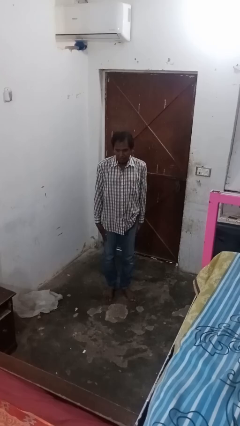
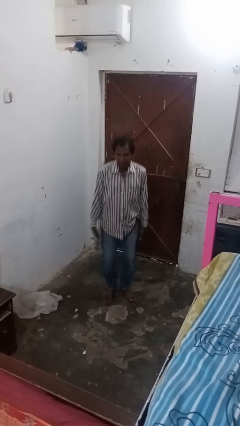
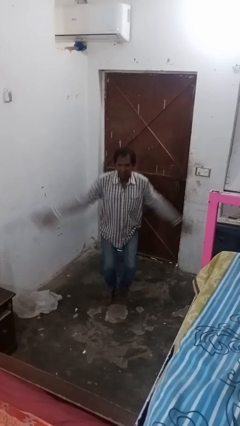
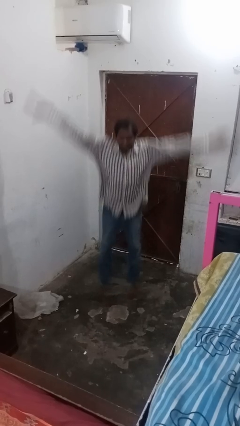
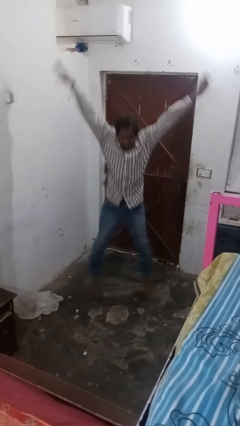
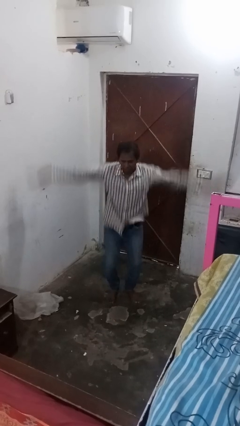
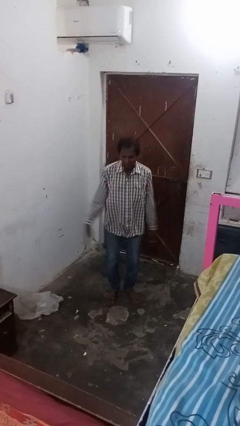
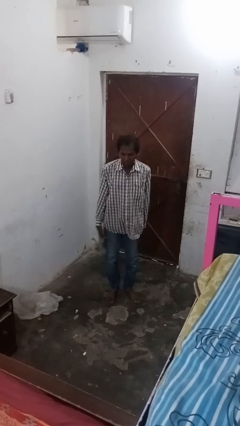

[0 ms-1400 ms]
person exercises with jumping jacks

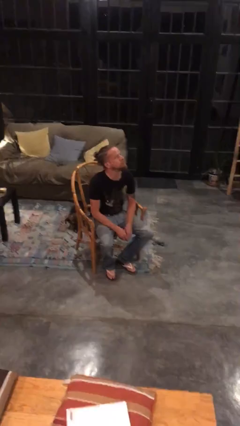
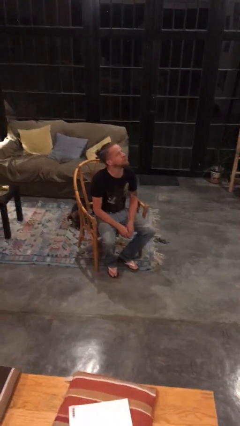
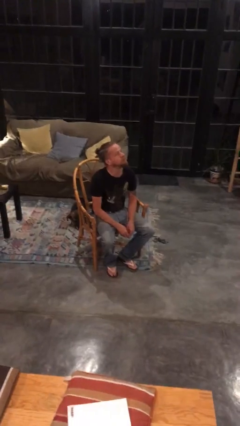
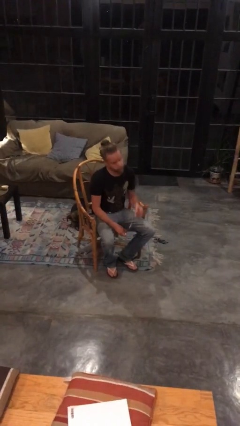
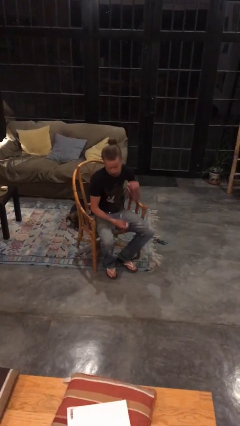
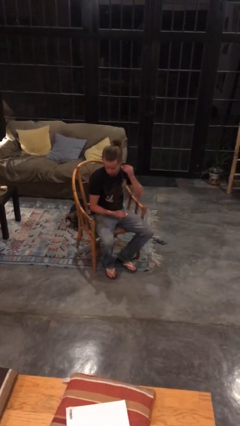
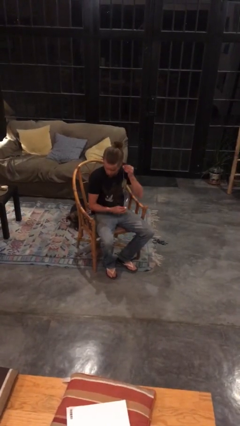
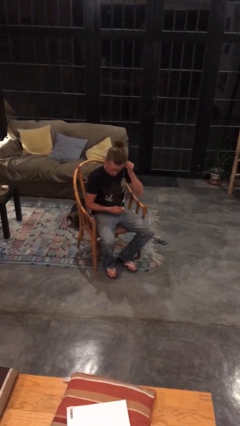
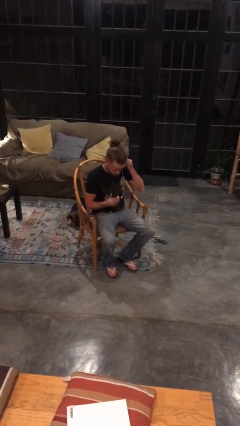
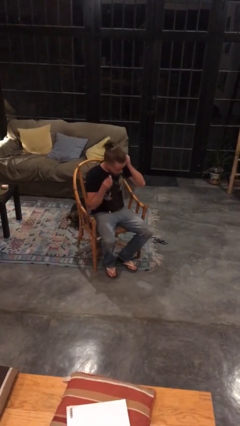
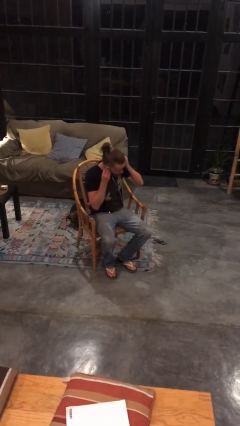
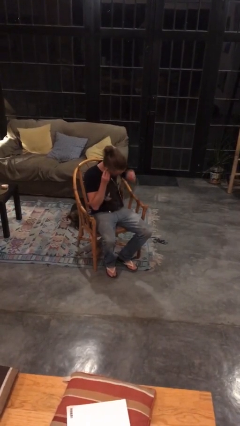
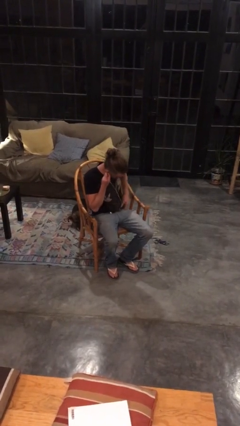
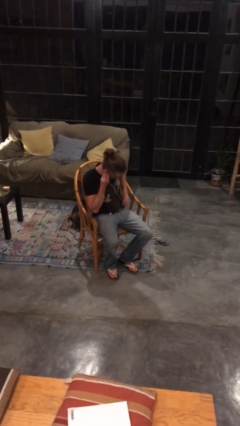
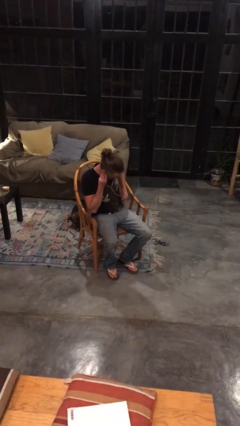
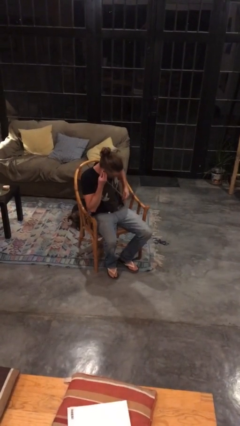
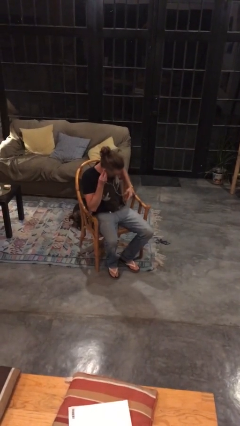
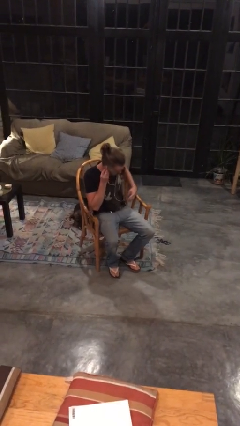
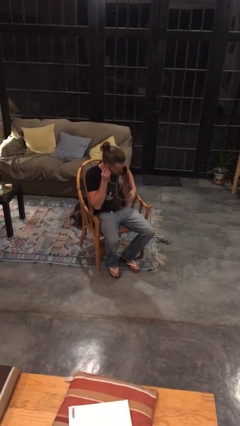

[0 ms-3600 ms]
person puts on headphones

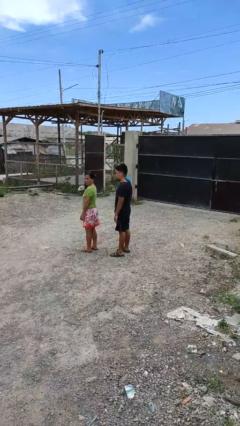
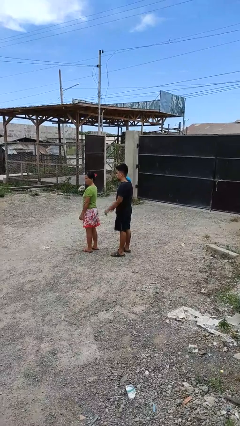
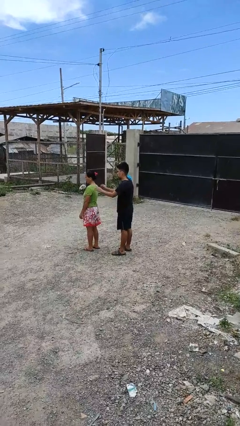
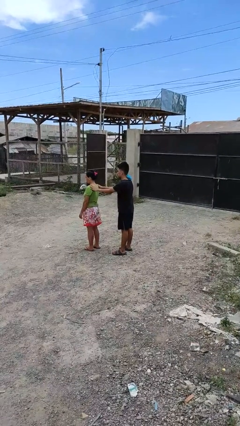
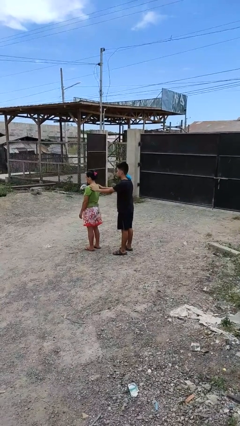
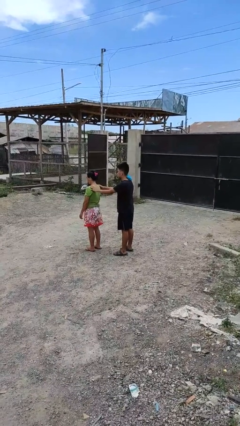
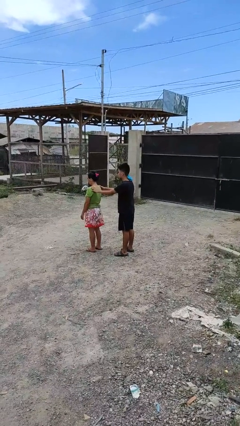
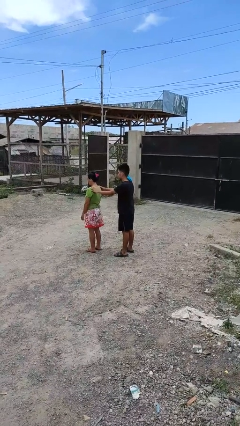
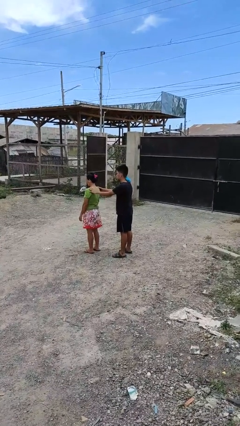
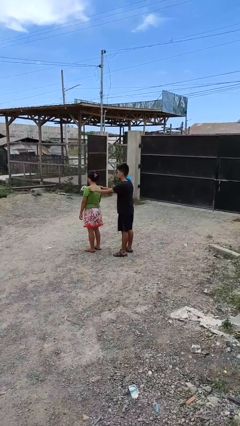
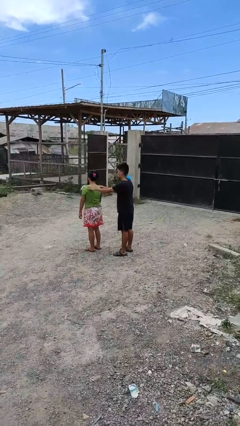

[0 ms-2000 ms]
person grabs person by shoulder

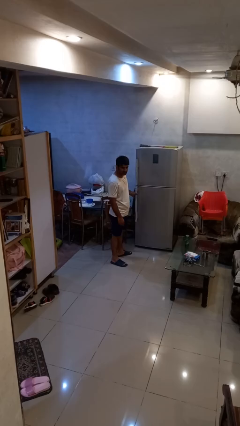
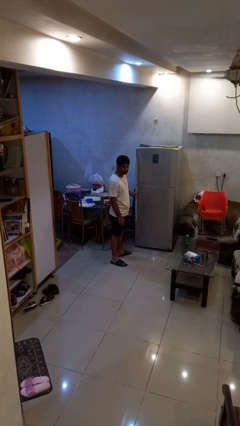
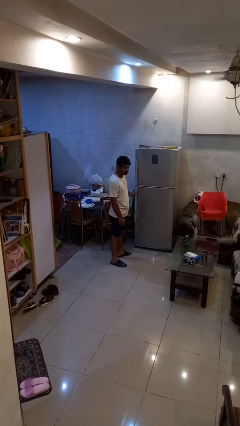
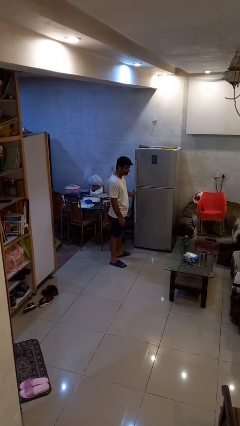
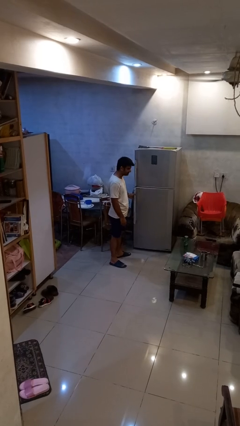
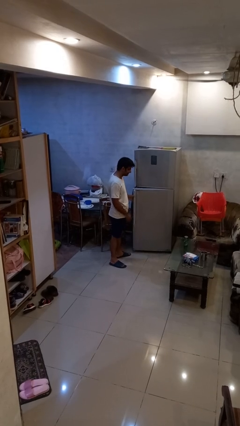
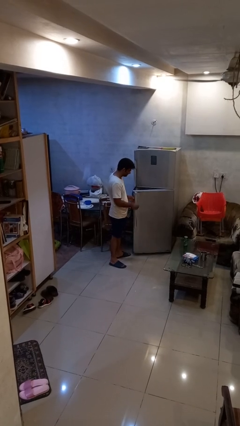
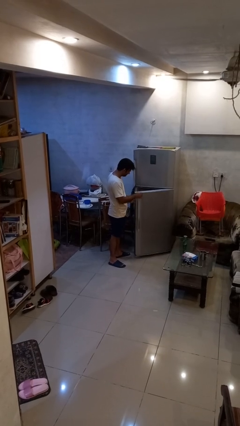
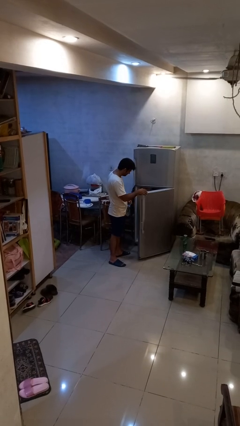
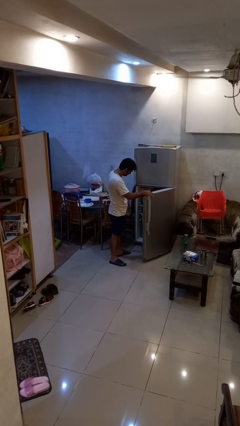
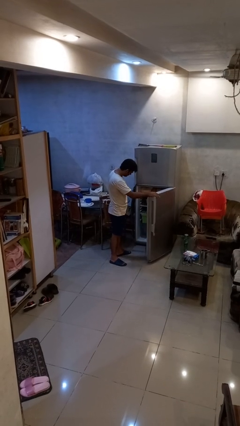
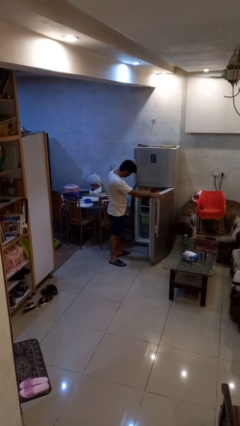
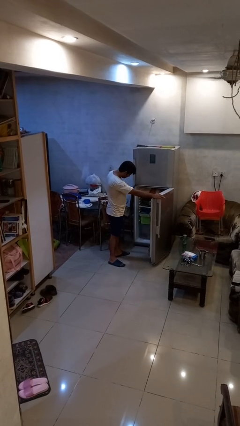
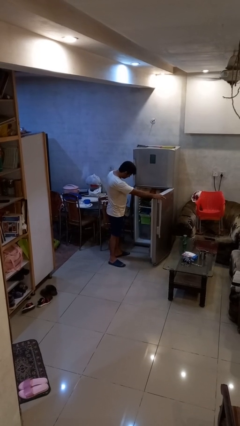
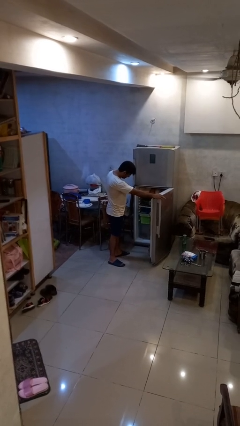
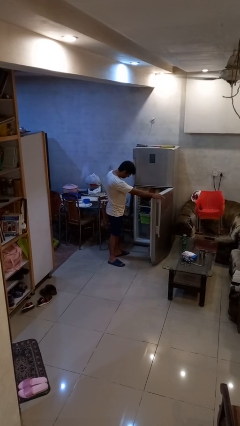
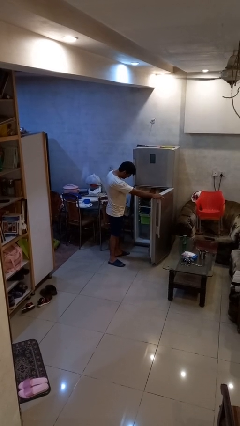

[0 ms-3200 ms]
person opens refrigerator

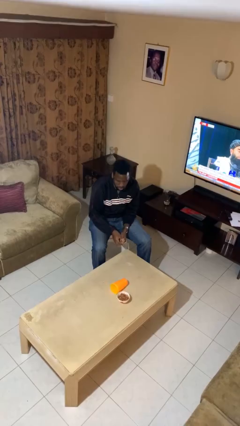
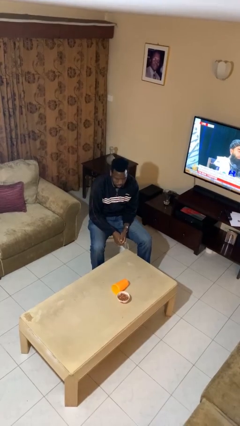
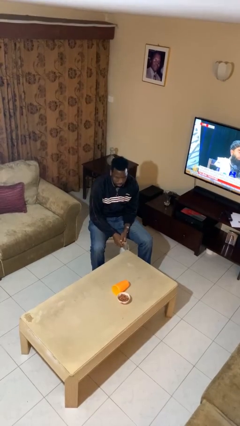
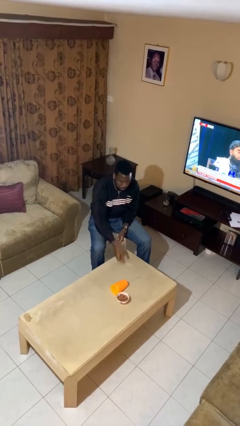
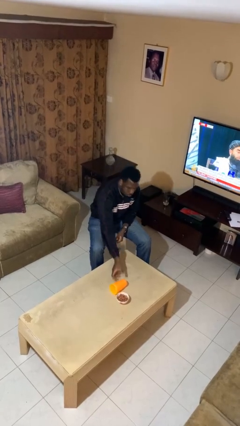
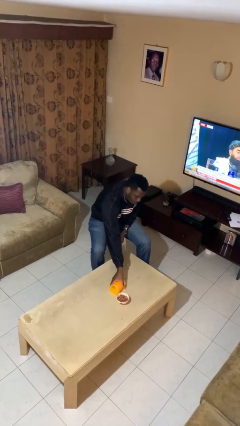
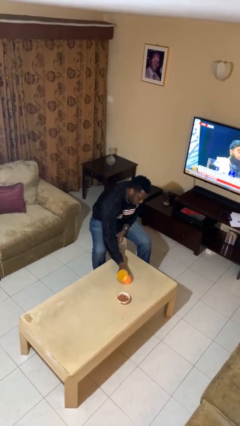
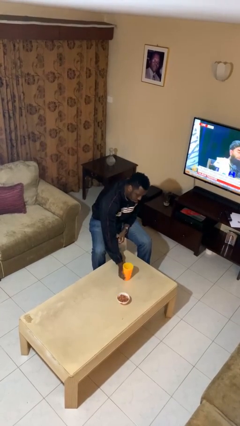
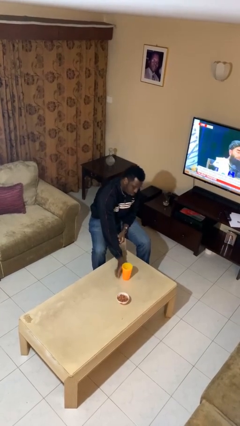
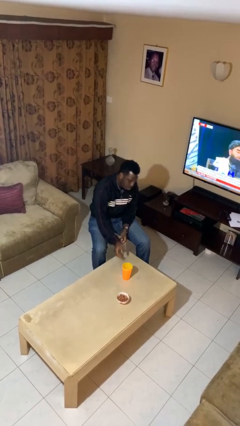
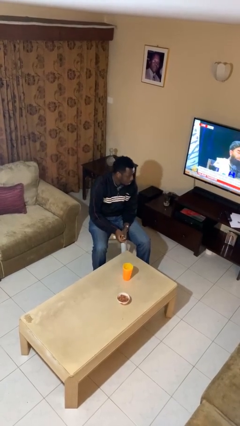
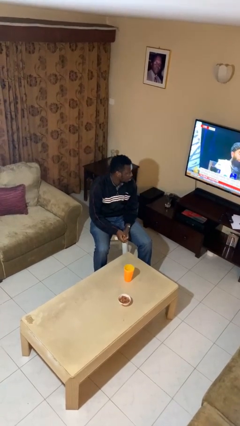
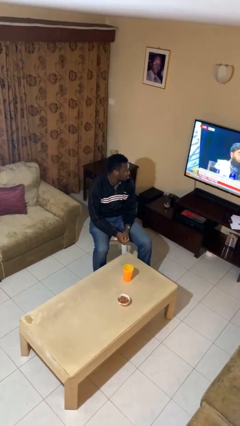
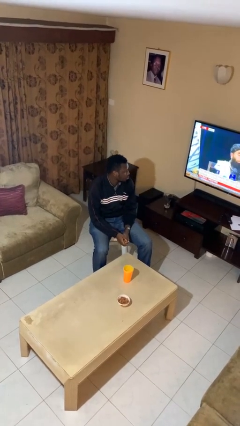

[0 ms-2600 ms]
person sets upright glass

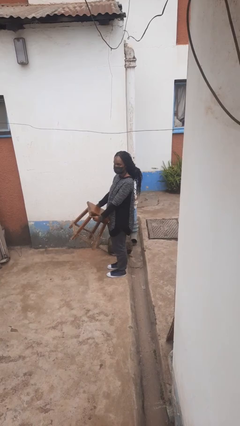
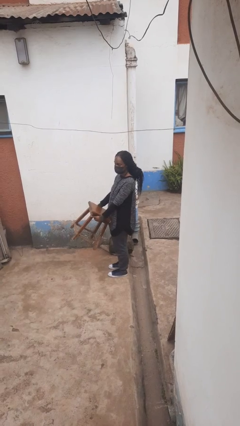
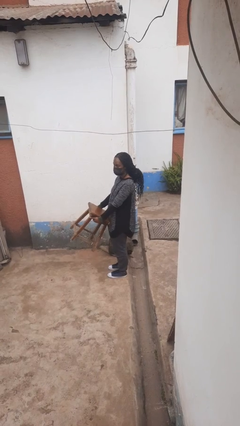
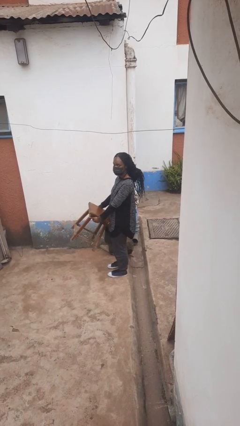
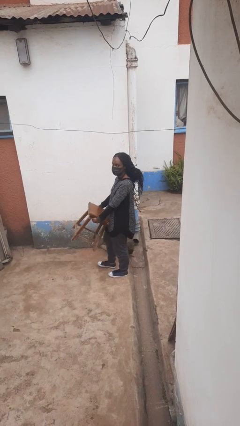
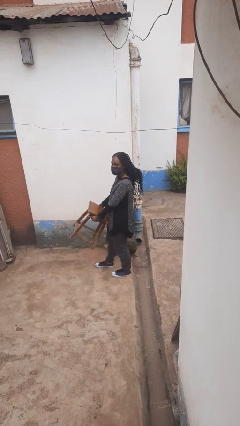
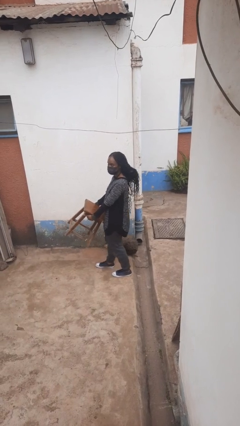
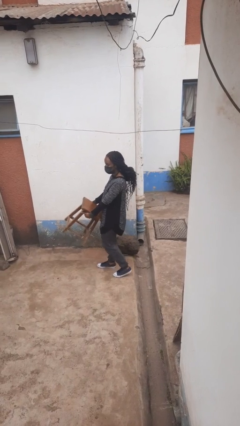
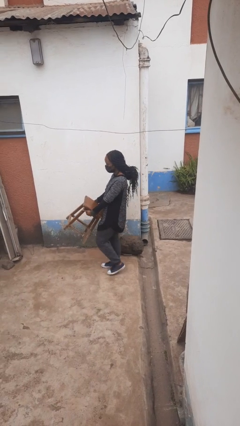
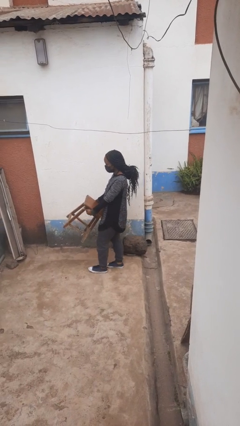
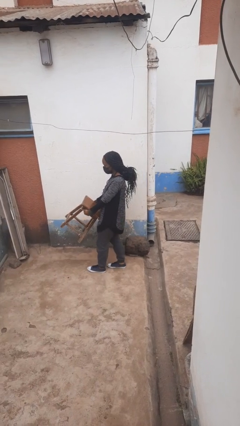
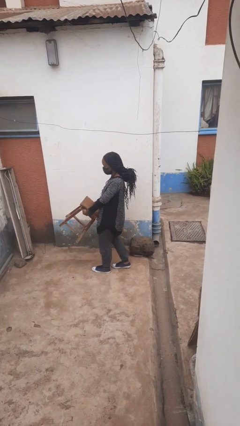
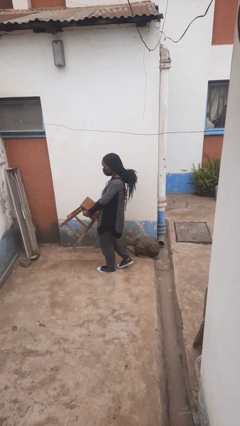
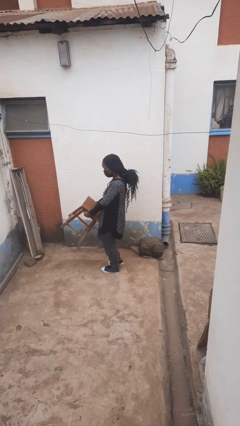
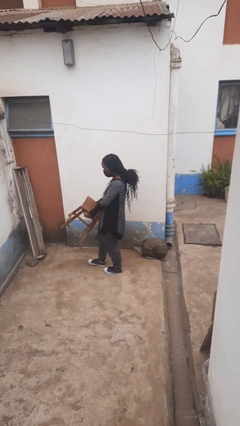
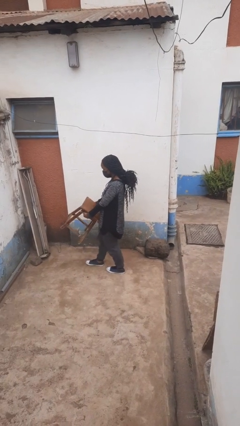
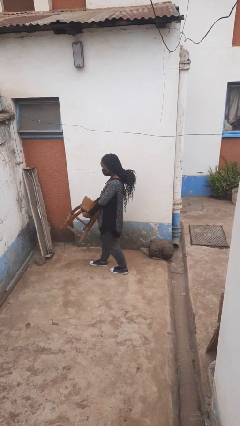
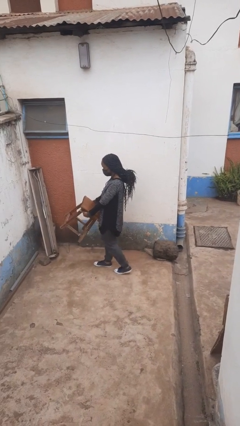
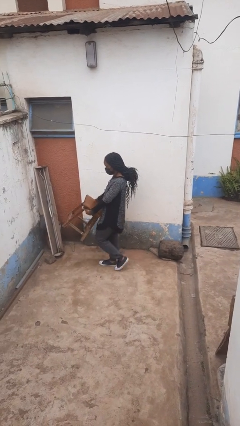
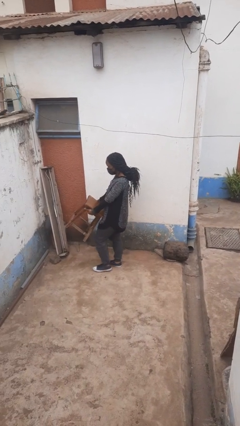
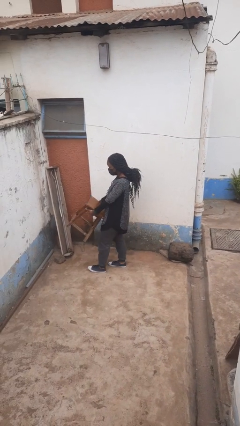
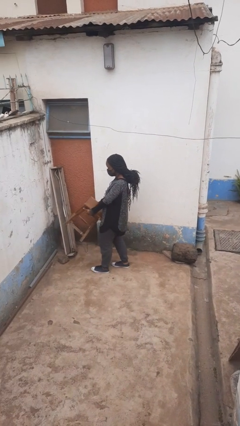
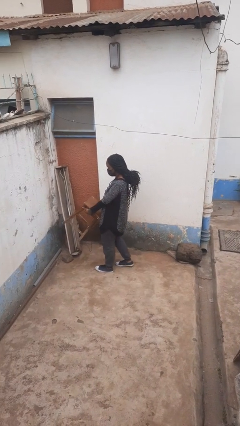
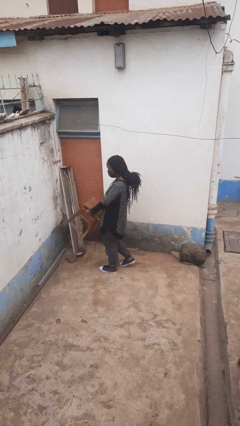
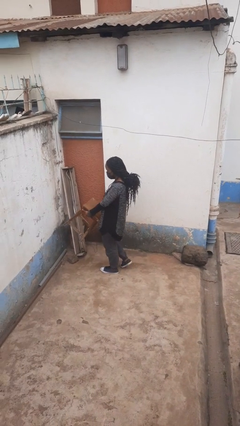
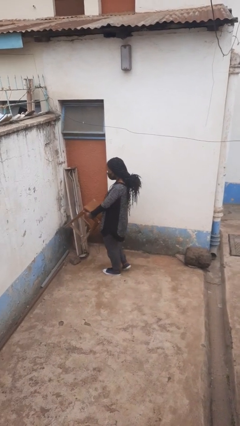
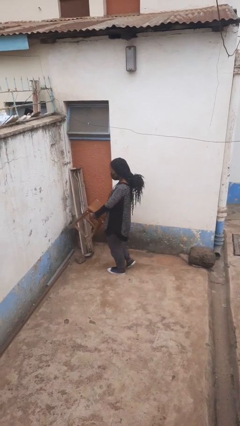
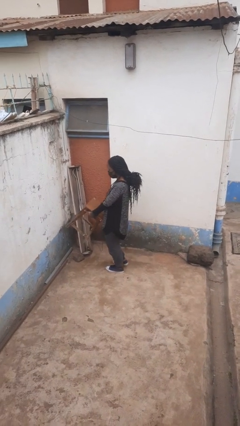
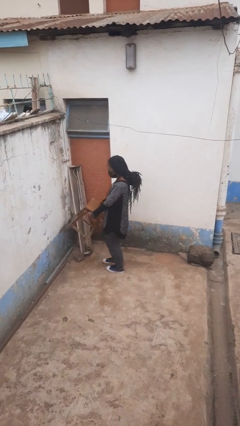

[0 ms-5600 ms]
person carries furniture
